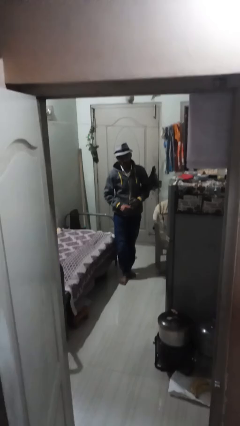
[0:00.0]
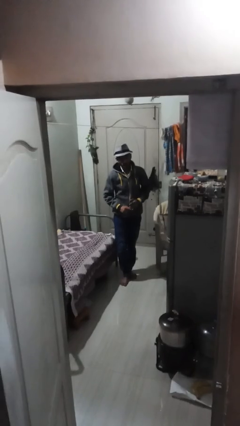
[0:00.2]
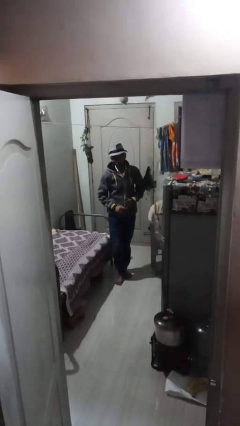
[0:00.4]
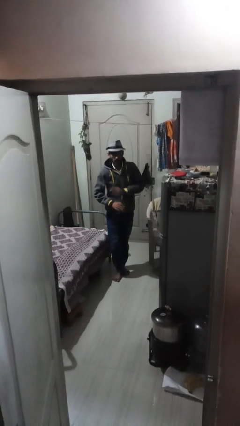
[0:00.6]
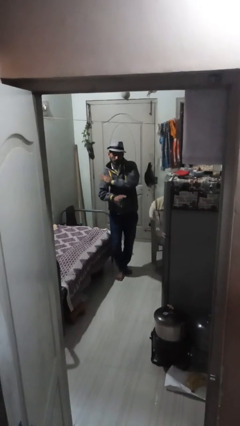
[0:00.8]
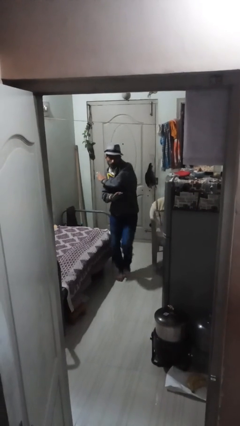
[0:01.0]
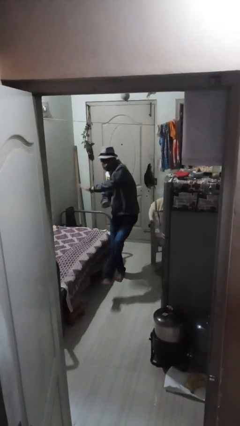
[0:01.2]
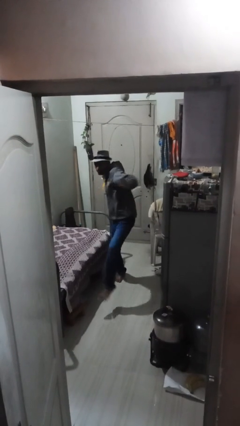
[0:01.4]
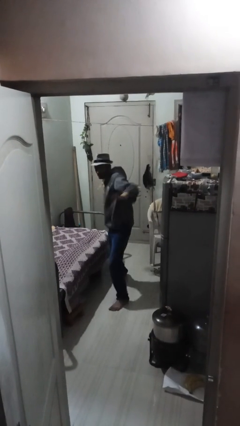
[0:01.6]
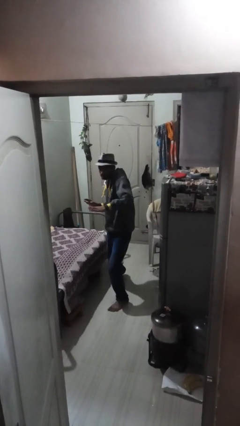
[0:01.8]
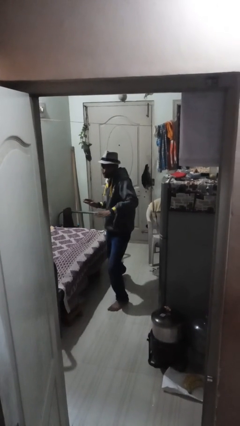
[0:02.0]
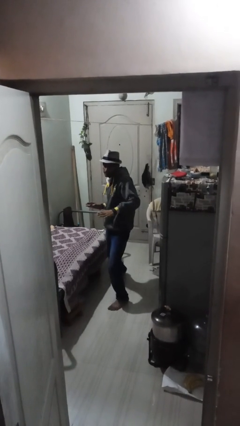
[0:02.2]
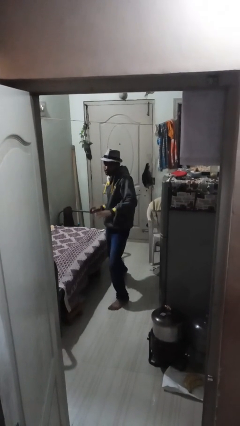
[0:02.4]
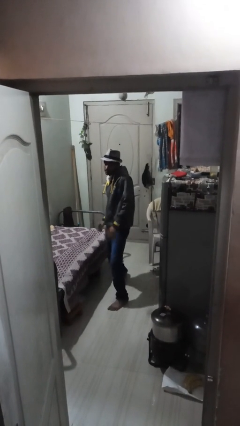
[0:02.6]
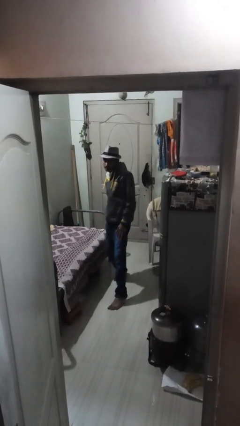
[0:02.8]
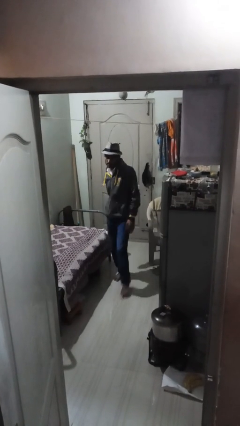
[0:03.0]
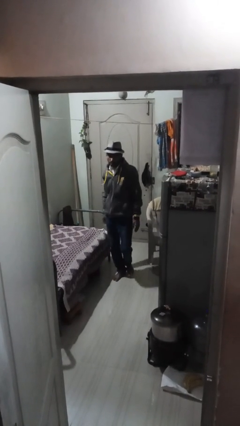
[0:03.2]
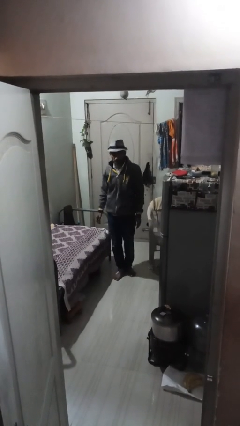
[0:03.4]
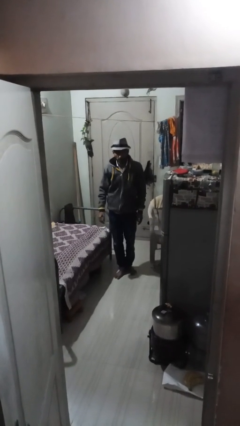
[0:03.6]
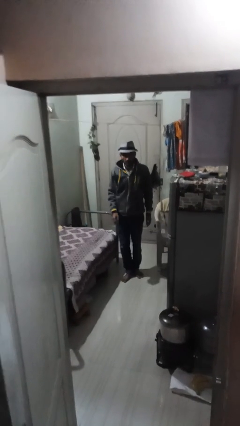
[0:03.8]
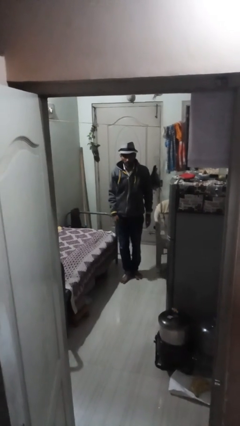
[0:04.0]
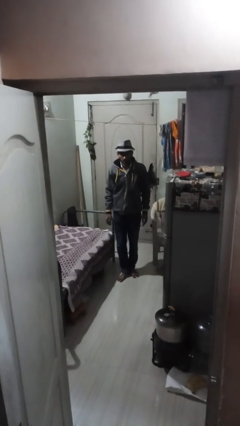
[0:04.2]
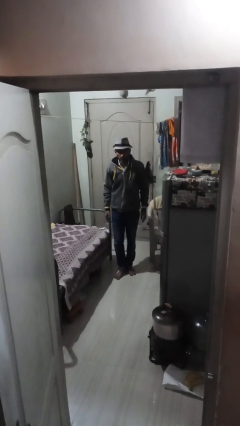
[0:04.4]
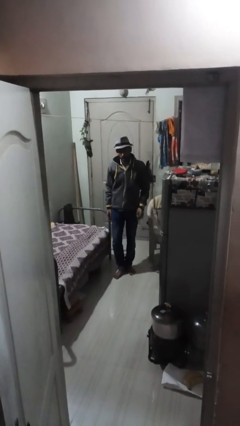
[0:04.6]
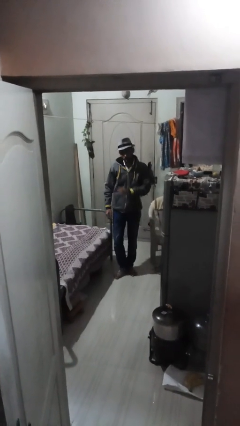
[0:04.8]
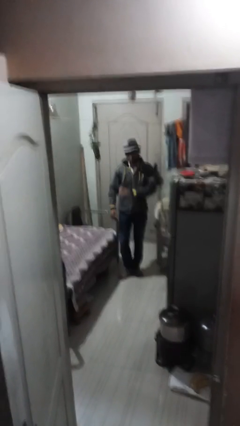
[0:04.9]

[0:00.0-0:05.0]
person karate chop

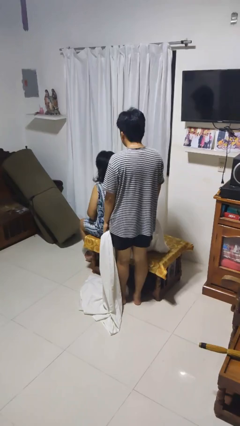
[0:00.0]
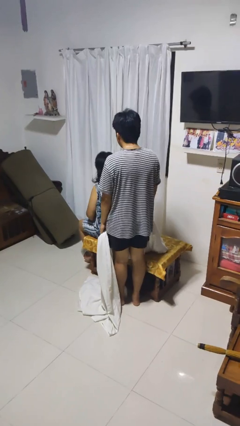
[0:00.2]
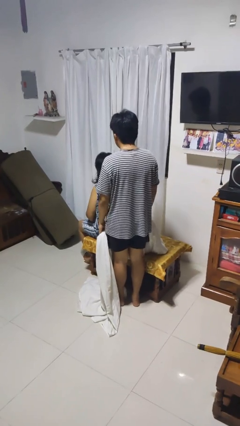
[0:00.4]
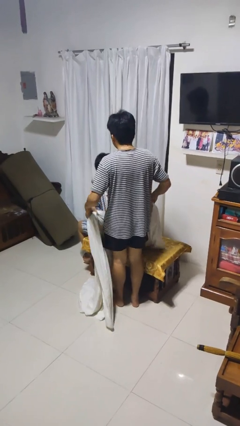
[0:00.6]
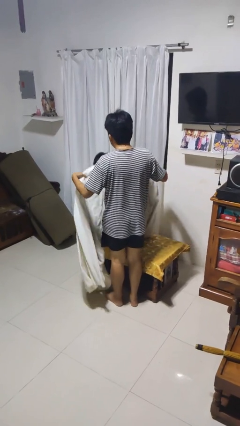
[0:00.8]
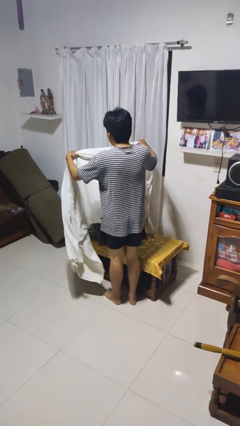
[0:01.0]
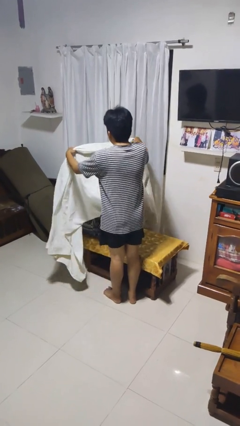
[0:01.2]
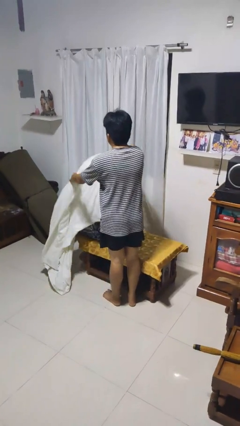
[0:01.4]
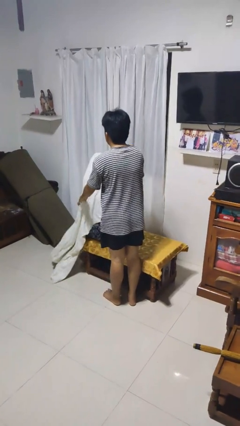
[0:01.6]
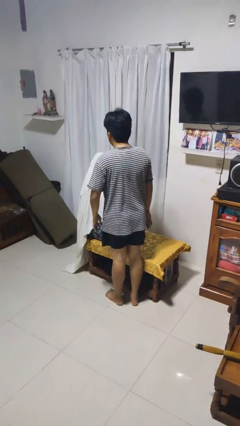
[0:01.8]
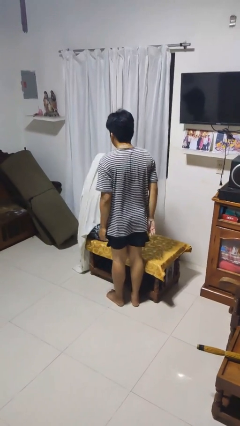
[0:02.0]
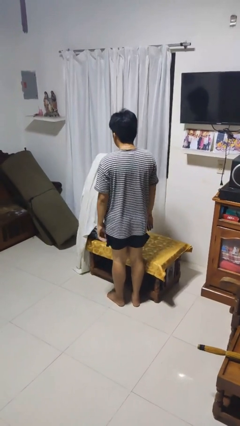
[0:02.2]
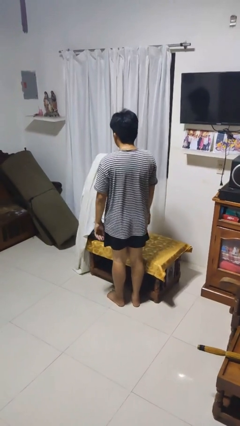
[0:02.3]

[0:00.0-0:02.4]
person covers friend with blanket

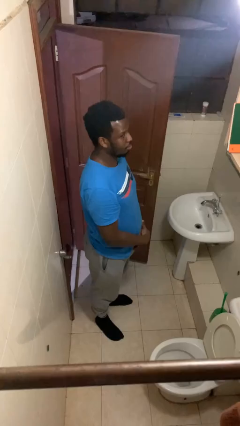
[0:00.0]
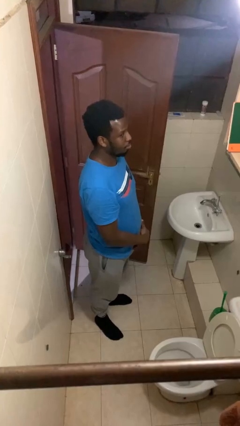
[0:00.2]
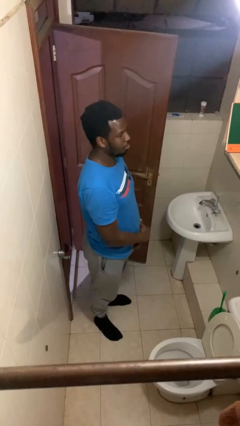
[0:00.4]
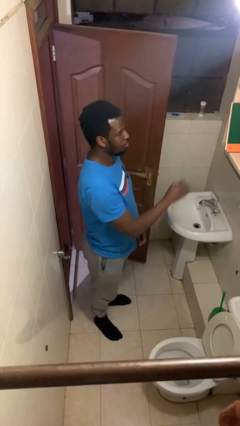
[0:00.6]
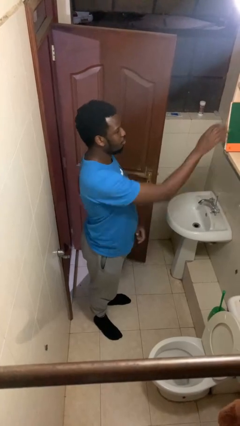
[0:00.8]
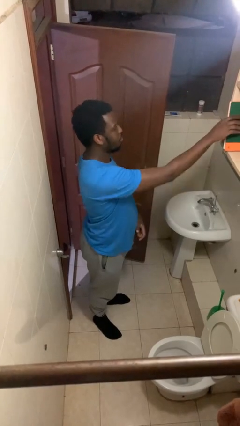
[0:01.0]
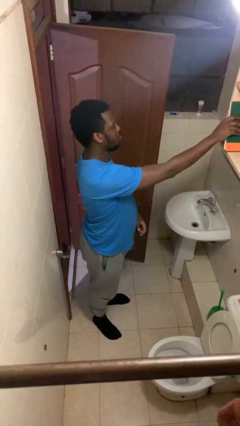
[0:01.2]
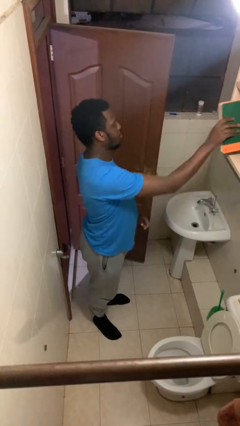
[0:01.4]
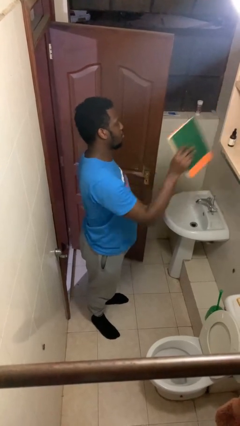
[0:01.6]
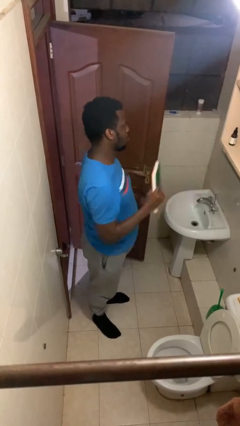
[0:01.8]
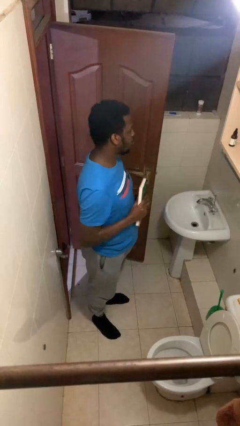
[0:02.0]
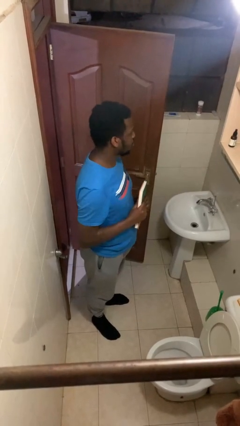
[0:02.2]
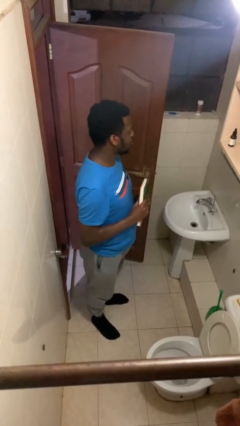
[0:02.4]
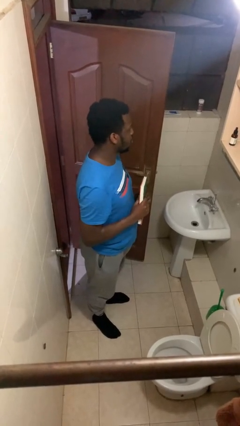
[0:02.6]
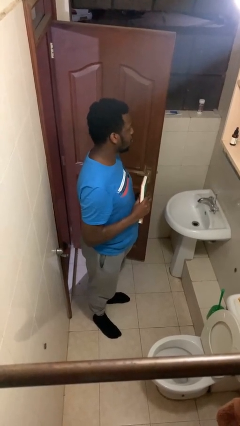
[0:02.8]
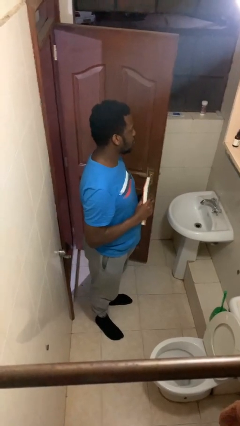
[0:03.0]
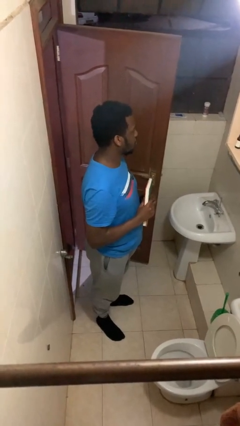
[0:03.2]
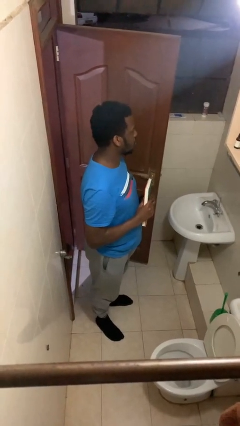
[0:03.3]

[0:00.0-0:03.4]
person picks up object from cabinet

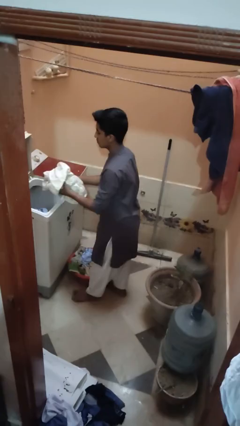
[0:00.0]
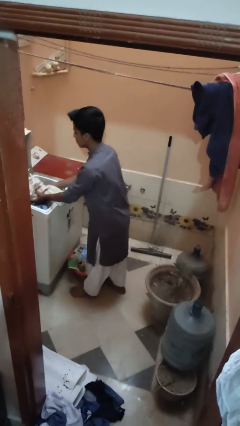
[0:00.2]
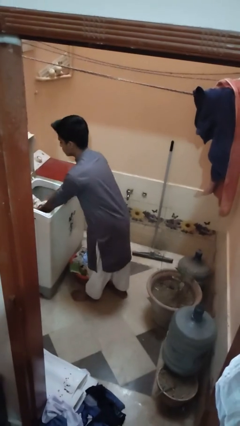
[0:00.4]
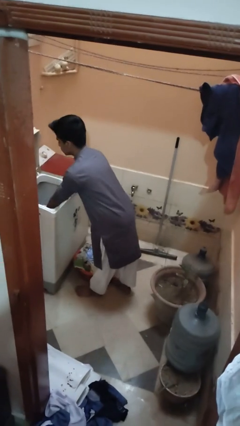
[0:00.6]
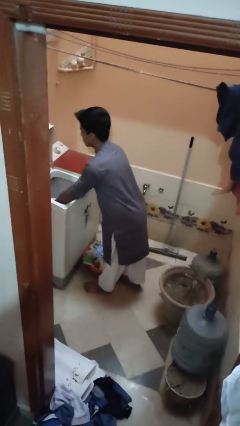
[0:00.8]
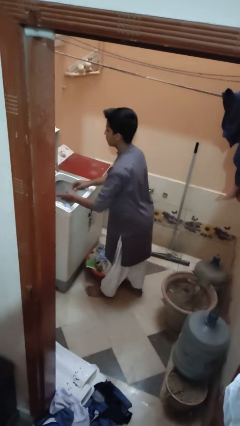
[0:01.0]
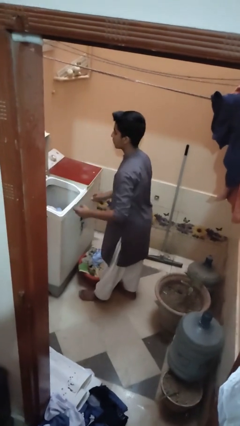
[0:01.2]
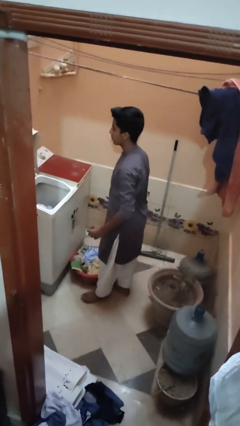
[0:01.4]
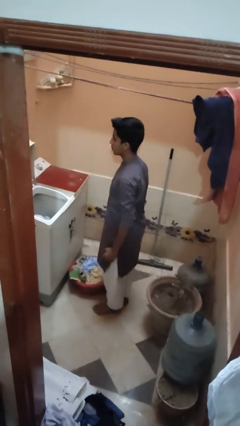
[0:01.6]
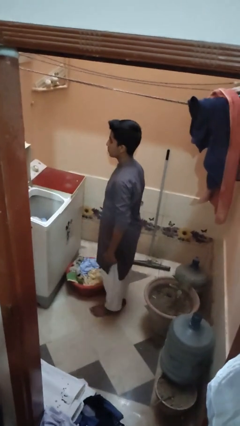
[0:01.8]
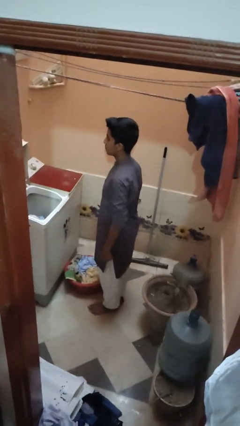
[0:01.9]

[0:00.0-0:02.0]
person loads clotheswasher

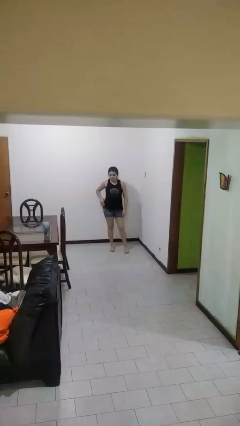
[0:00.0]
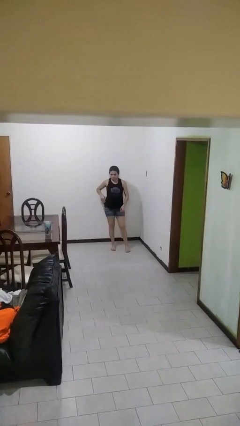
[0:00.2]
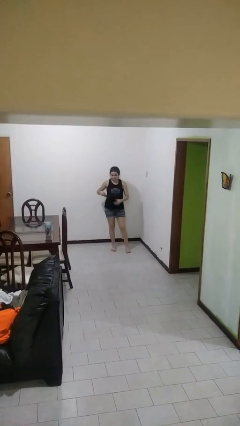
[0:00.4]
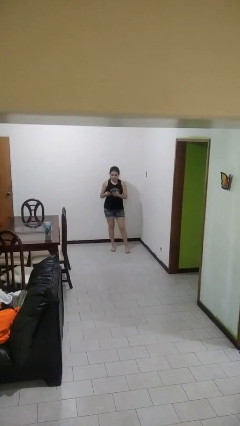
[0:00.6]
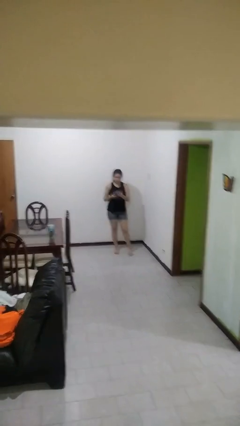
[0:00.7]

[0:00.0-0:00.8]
person takes phone from pocket

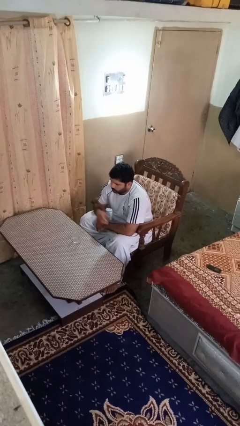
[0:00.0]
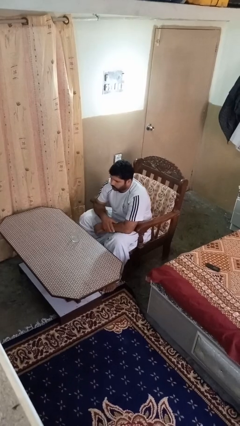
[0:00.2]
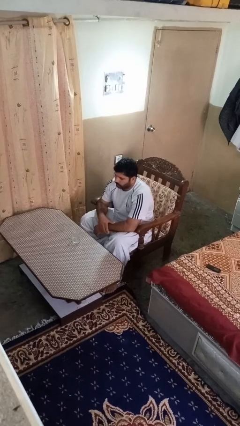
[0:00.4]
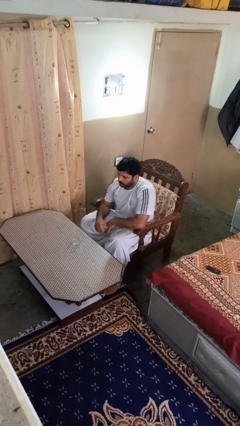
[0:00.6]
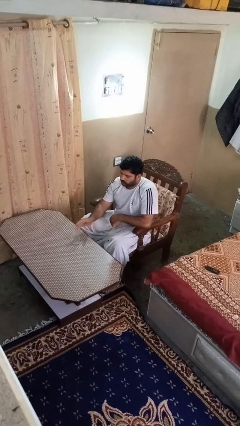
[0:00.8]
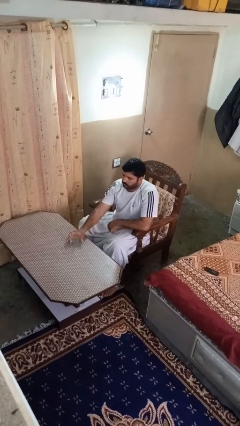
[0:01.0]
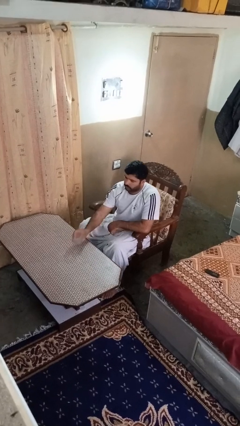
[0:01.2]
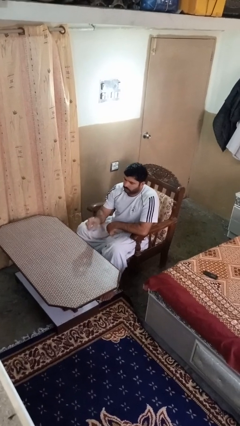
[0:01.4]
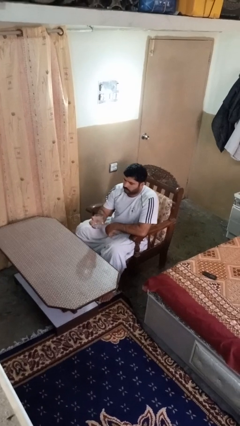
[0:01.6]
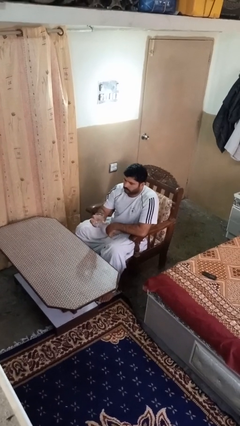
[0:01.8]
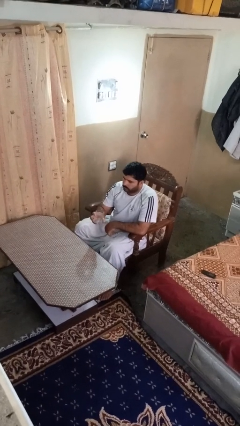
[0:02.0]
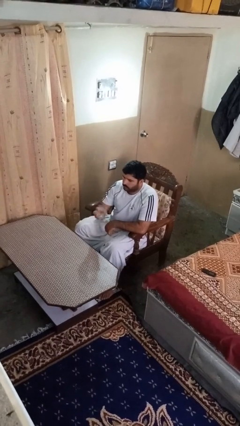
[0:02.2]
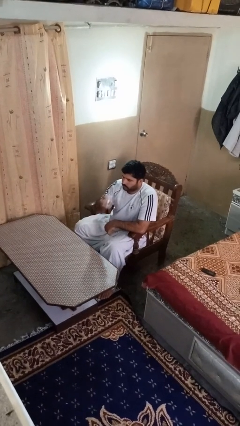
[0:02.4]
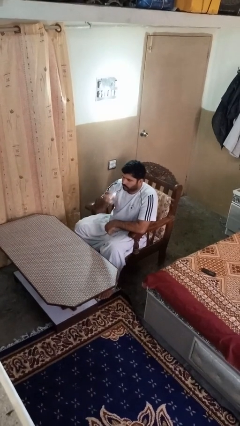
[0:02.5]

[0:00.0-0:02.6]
person picks up object from table

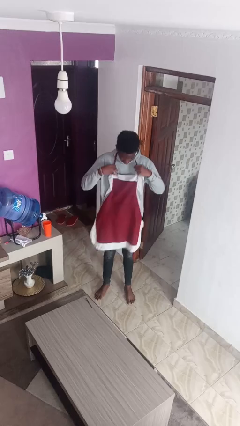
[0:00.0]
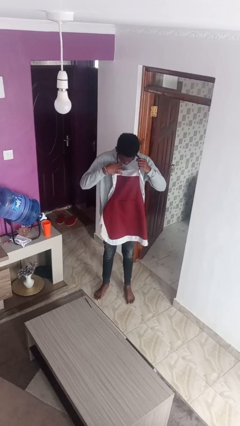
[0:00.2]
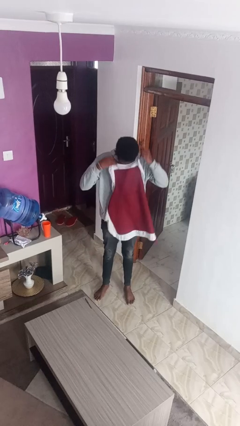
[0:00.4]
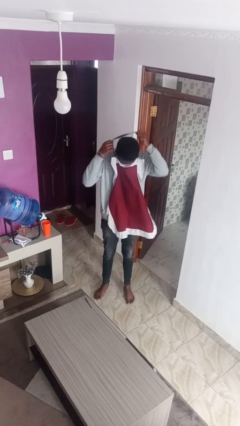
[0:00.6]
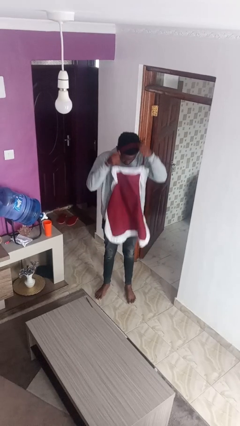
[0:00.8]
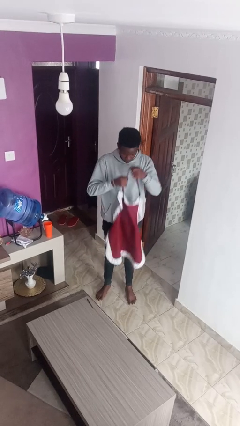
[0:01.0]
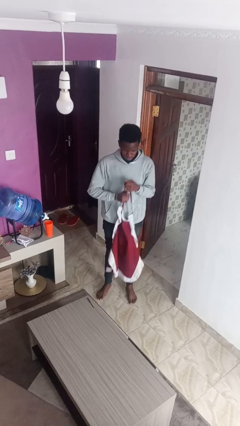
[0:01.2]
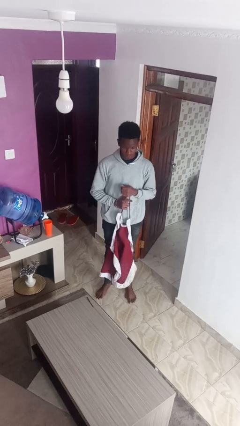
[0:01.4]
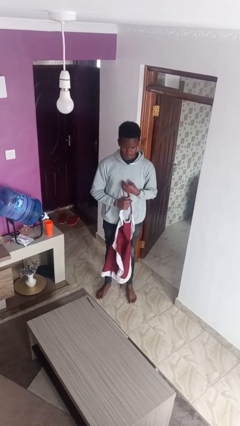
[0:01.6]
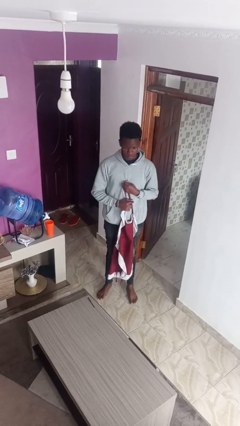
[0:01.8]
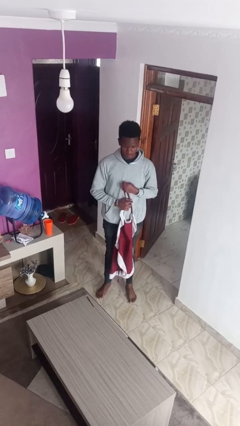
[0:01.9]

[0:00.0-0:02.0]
person takes off apron
